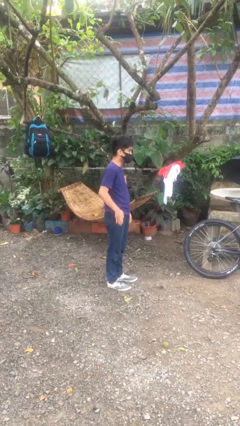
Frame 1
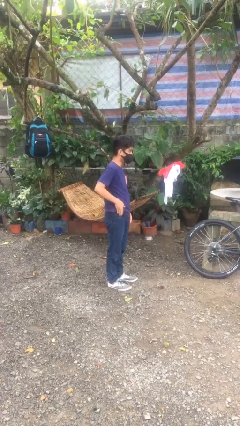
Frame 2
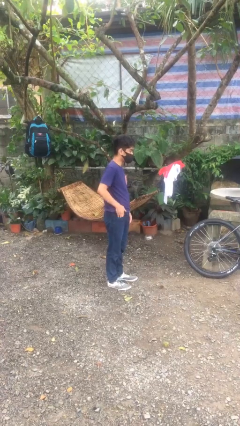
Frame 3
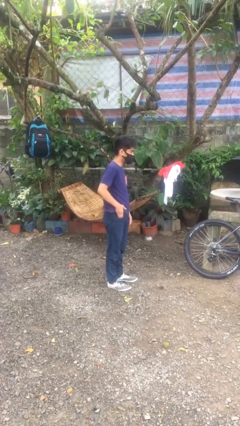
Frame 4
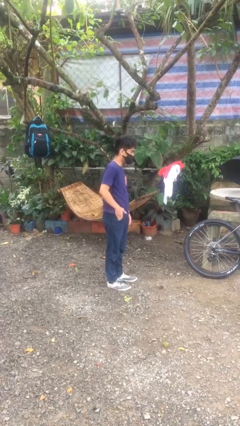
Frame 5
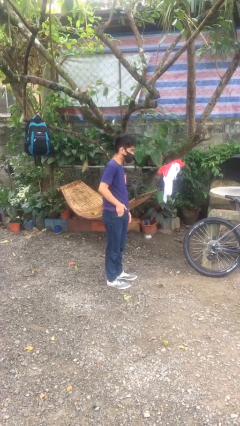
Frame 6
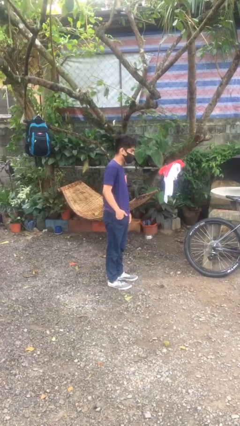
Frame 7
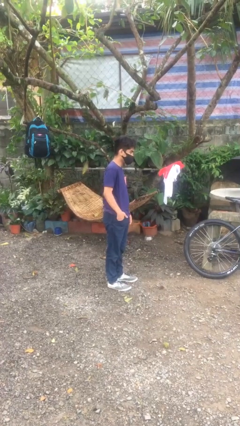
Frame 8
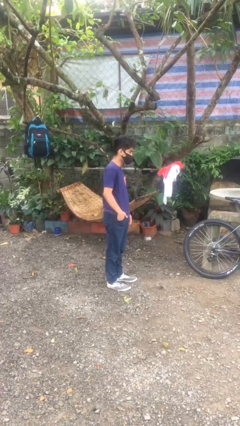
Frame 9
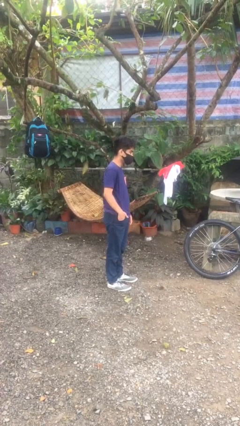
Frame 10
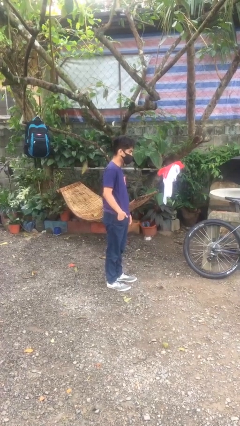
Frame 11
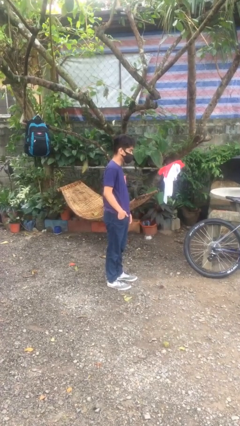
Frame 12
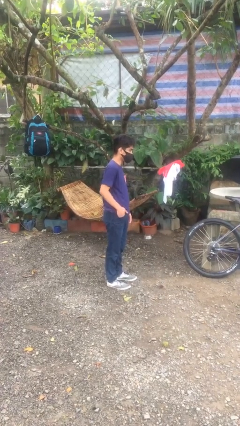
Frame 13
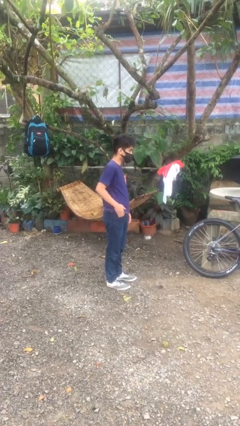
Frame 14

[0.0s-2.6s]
person puts hands in back pockets

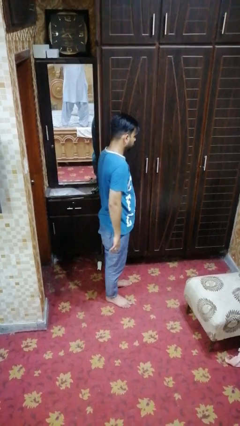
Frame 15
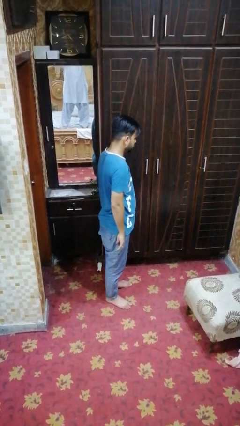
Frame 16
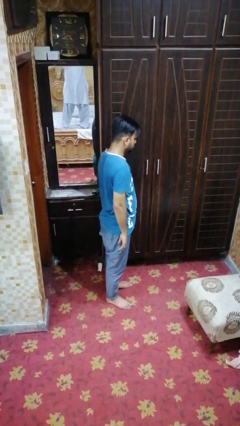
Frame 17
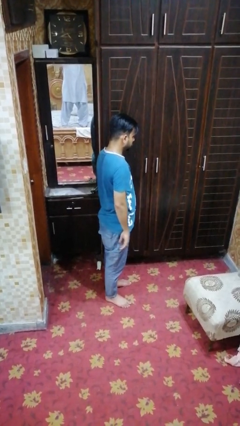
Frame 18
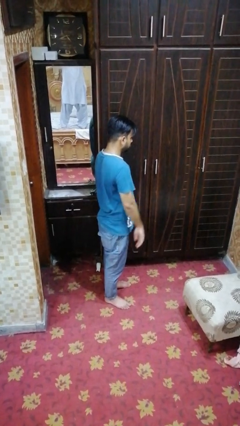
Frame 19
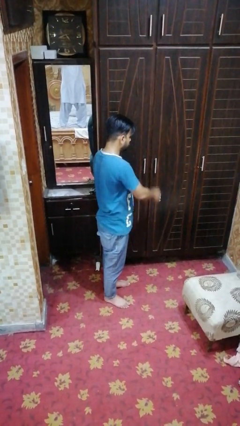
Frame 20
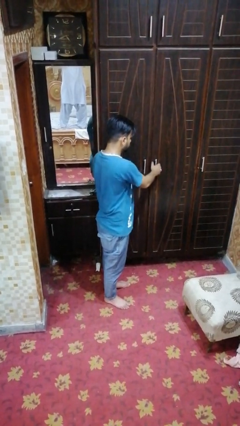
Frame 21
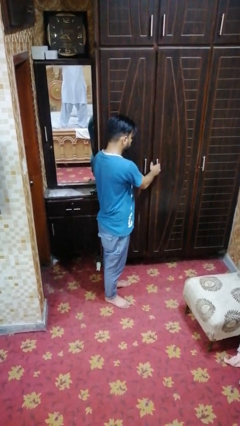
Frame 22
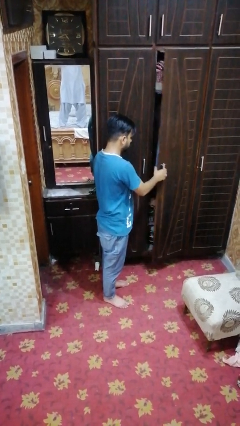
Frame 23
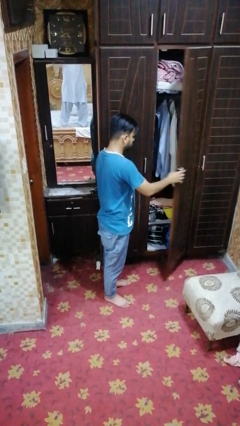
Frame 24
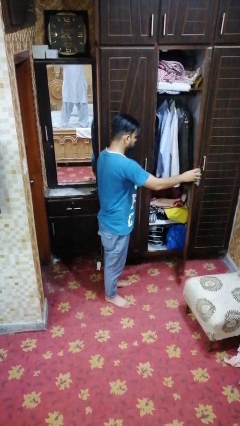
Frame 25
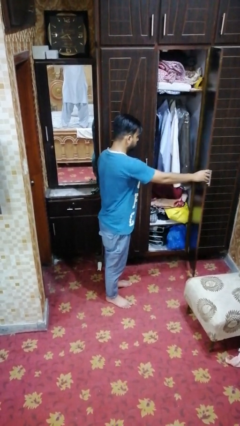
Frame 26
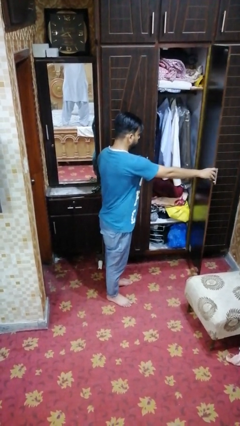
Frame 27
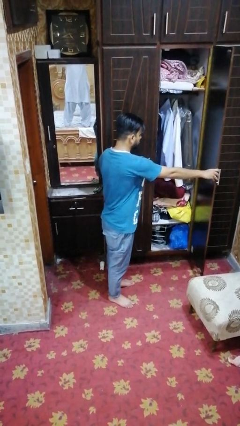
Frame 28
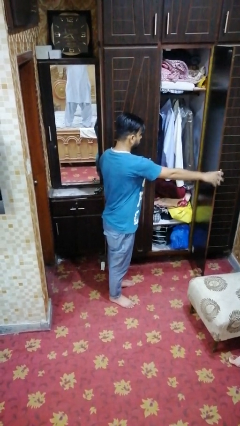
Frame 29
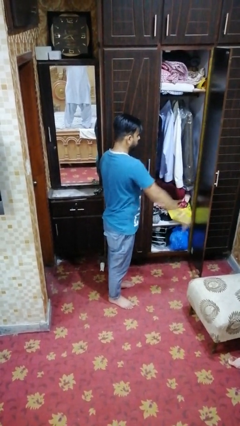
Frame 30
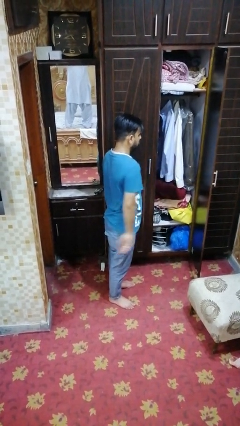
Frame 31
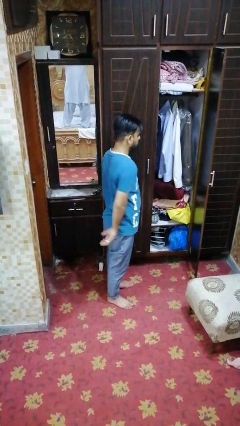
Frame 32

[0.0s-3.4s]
person opens closet door

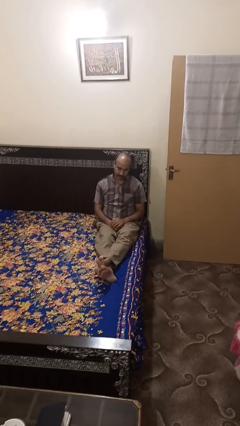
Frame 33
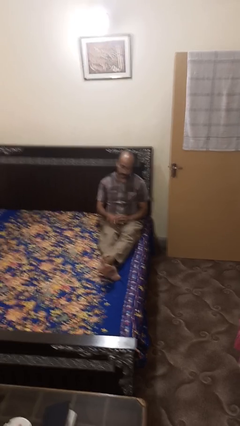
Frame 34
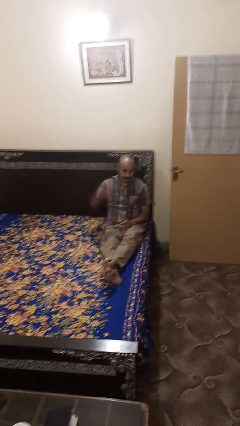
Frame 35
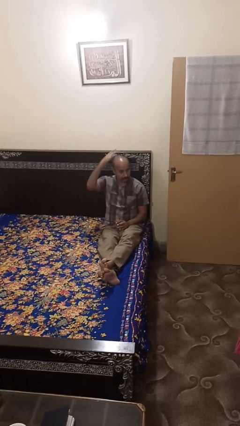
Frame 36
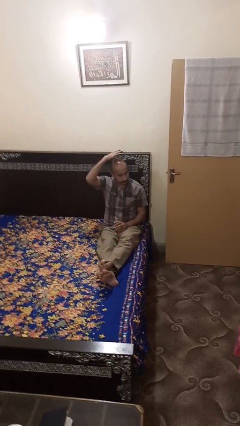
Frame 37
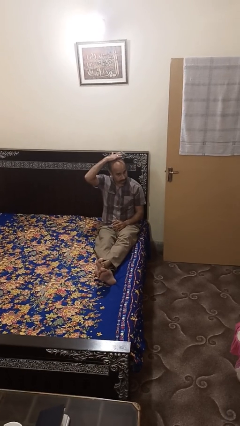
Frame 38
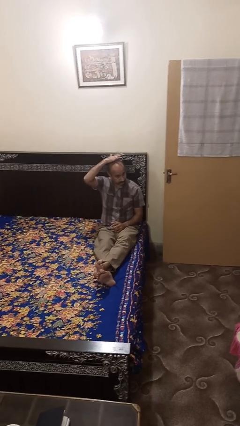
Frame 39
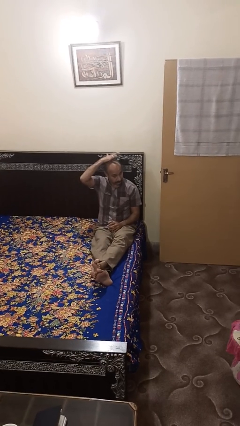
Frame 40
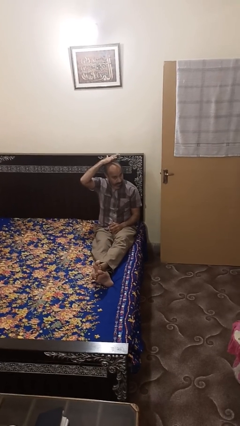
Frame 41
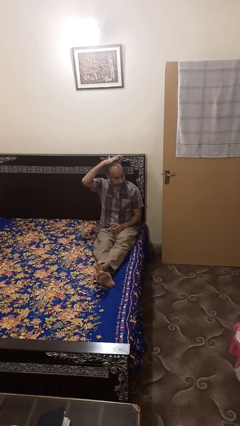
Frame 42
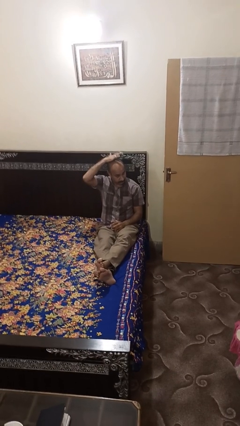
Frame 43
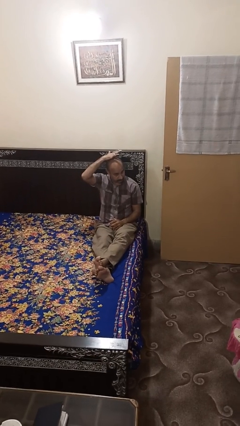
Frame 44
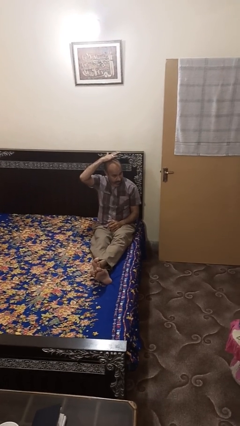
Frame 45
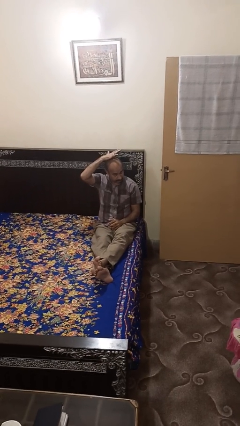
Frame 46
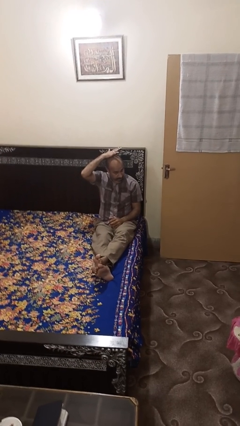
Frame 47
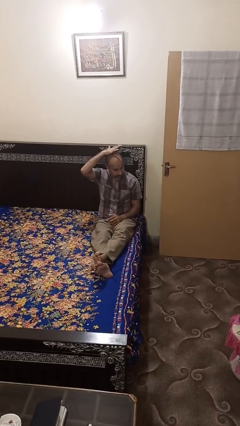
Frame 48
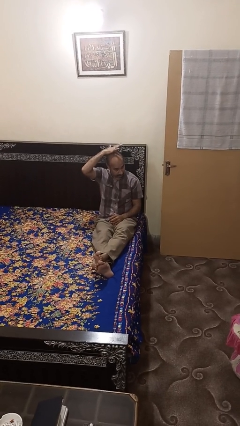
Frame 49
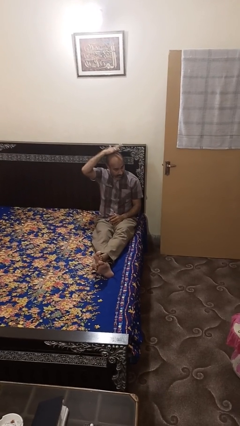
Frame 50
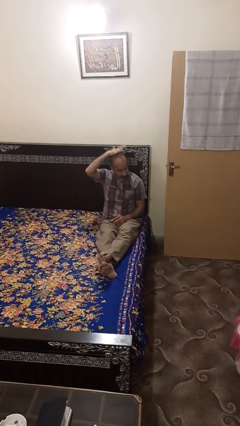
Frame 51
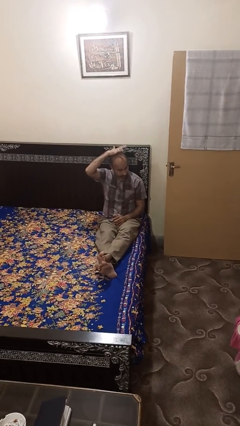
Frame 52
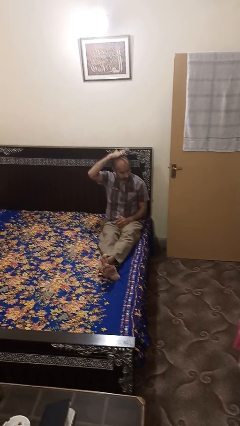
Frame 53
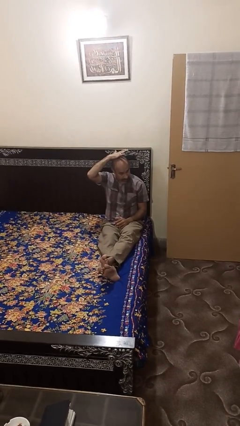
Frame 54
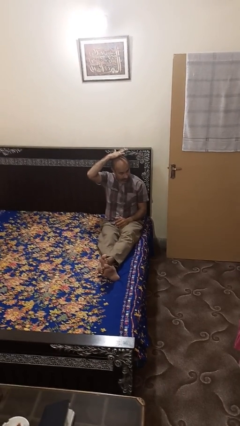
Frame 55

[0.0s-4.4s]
person pats head

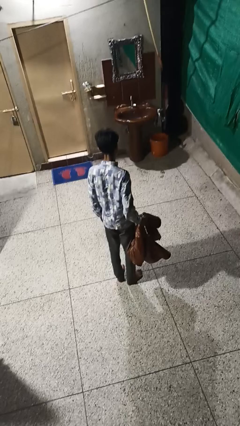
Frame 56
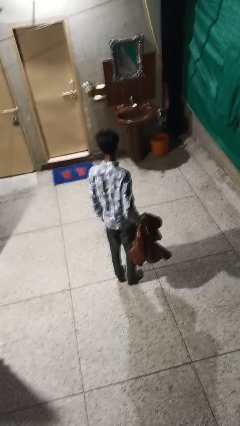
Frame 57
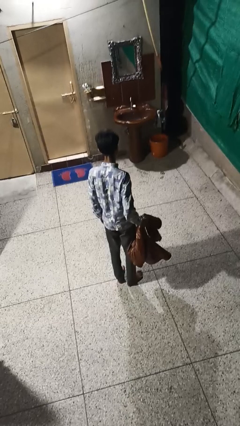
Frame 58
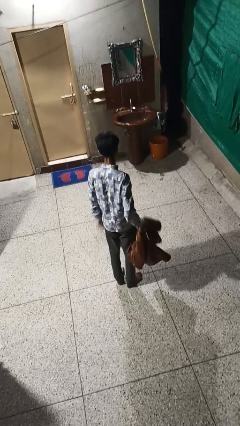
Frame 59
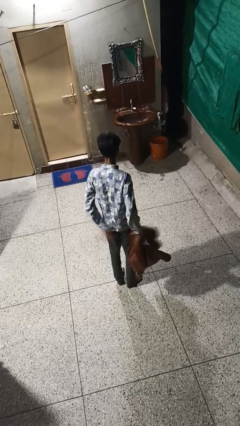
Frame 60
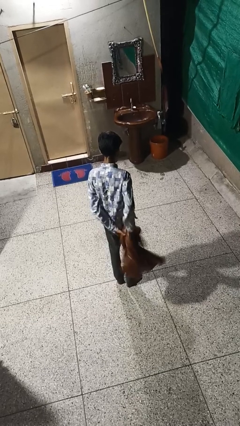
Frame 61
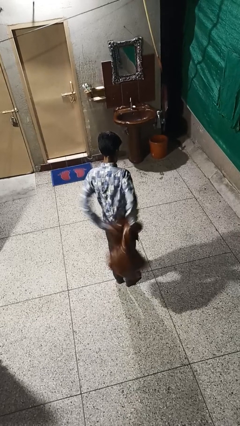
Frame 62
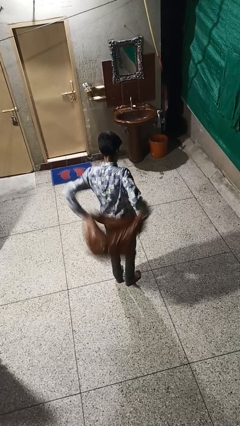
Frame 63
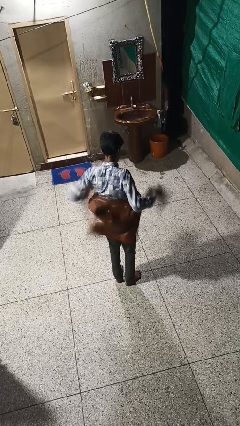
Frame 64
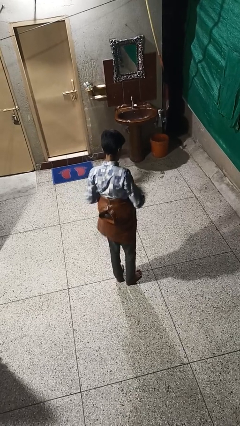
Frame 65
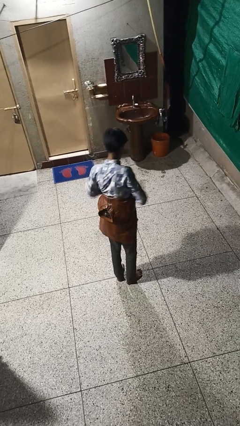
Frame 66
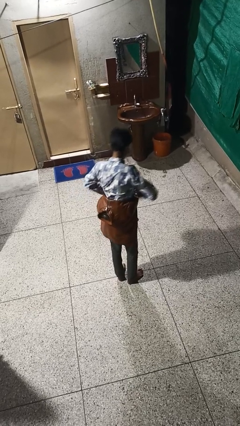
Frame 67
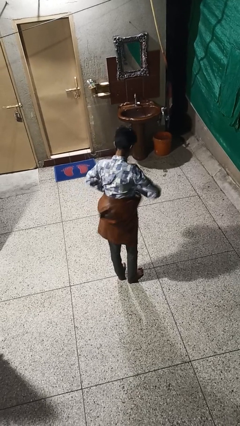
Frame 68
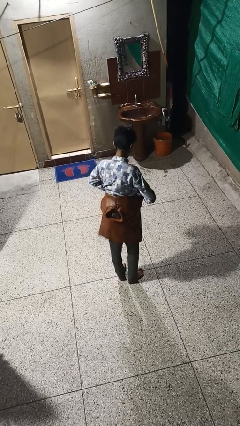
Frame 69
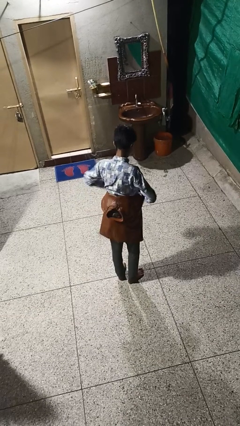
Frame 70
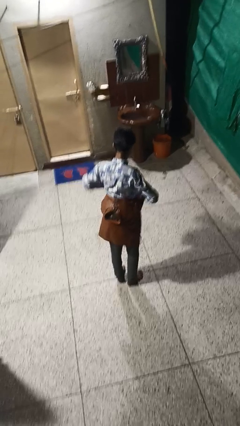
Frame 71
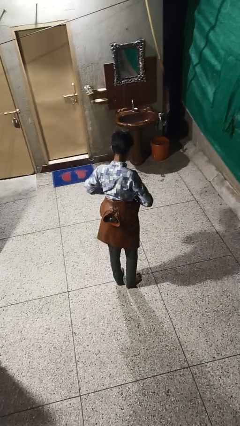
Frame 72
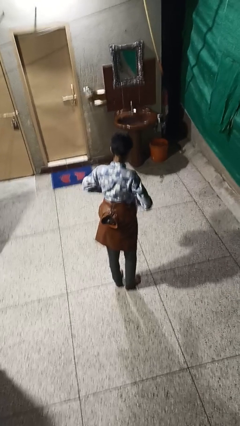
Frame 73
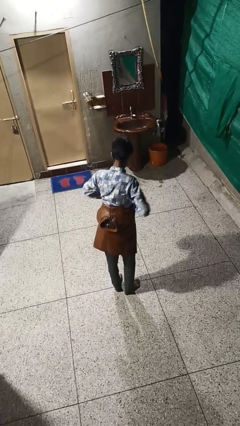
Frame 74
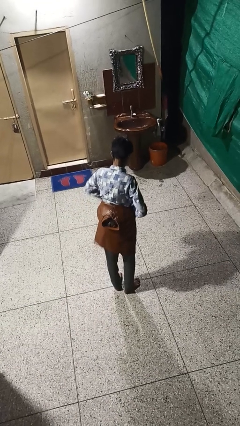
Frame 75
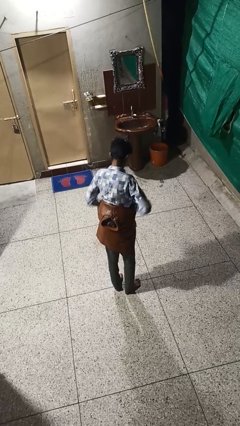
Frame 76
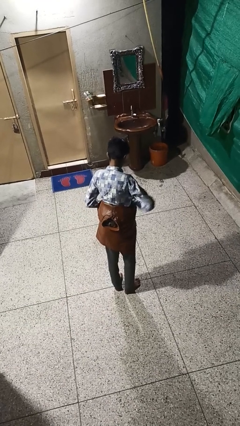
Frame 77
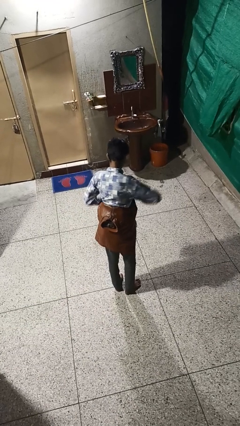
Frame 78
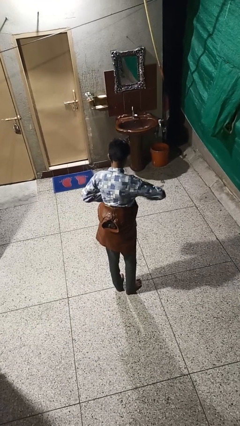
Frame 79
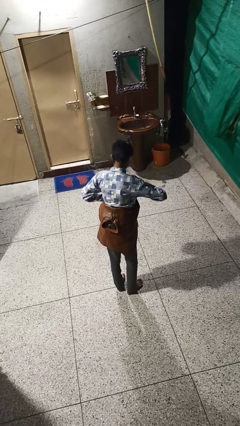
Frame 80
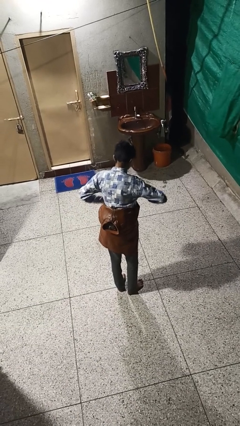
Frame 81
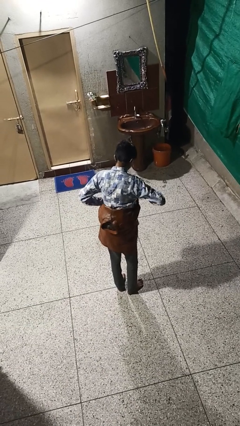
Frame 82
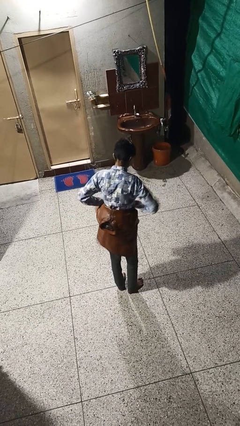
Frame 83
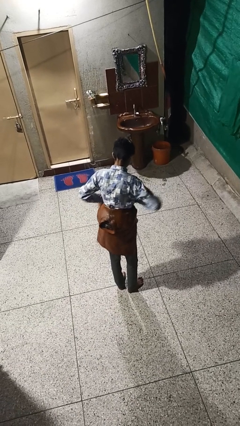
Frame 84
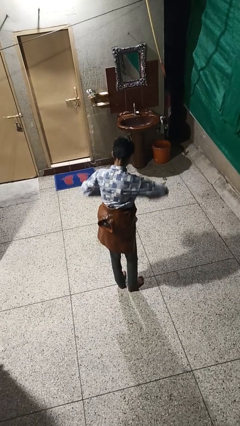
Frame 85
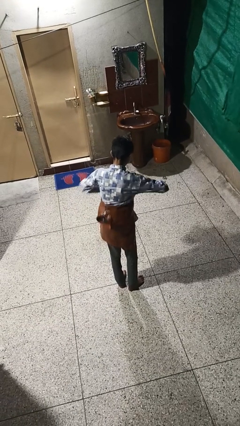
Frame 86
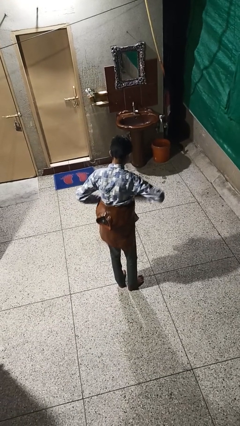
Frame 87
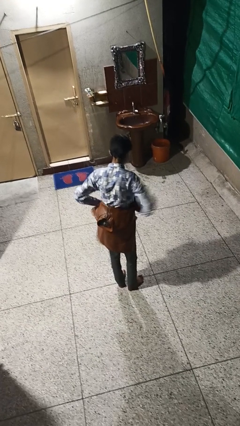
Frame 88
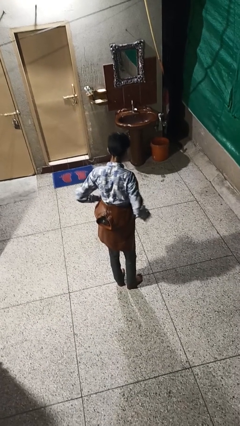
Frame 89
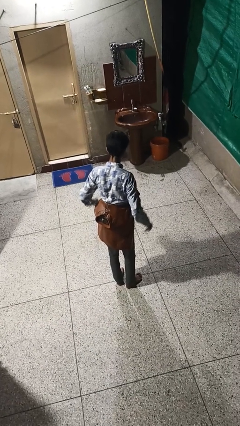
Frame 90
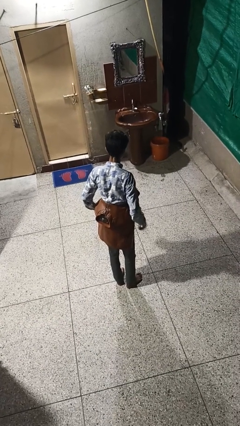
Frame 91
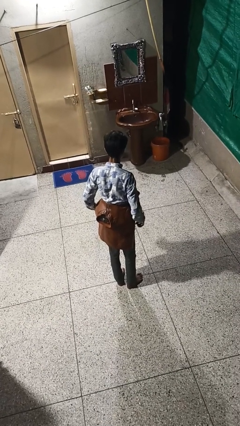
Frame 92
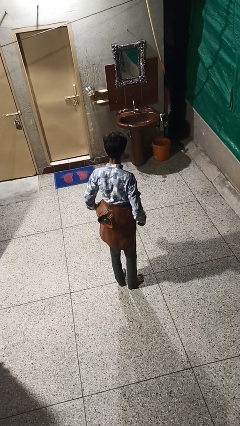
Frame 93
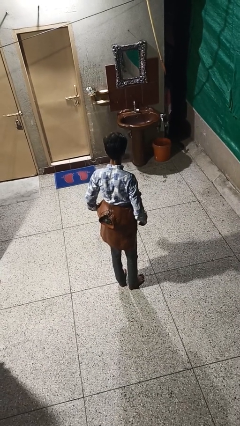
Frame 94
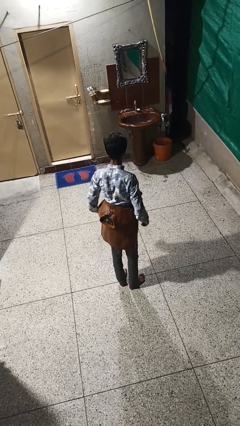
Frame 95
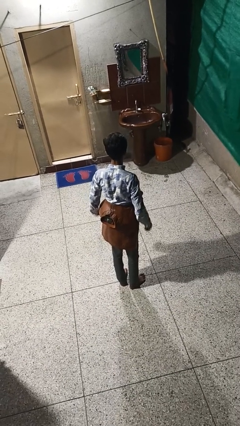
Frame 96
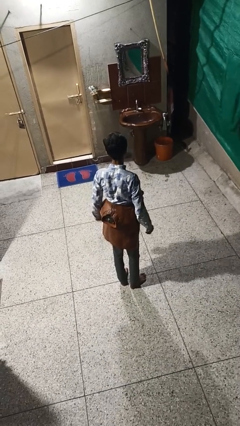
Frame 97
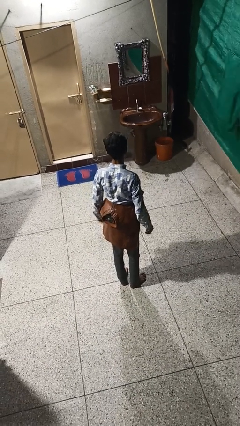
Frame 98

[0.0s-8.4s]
person ties jacket around waist
